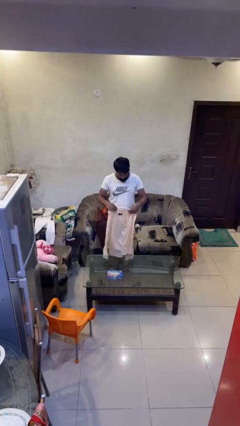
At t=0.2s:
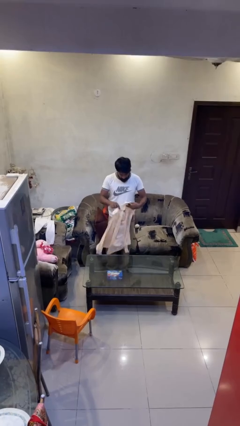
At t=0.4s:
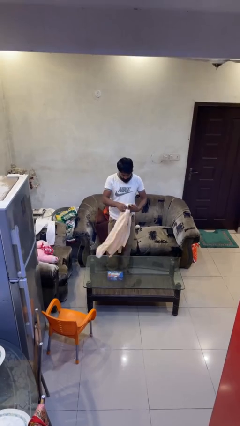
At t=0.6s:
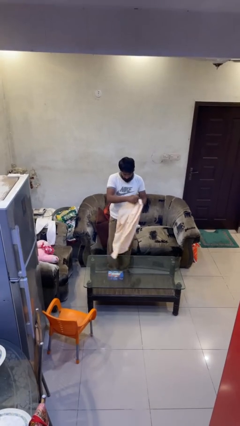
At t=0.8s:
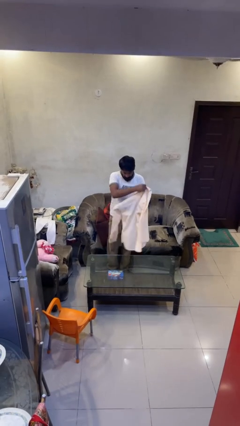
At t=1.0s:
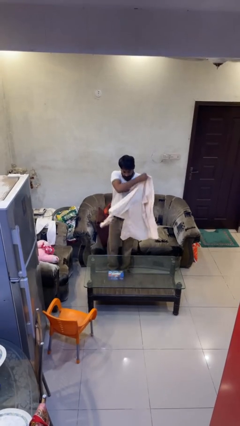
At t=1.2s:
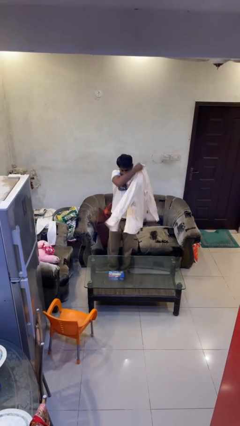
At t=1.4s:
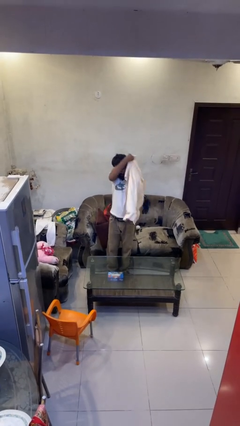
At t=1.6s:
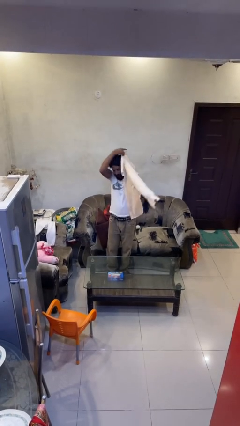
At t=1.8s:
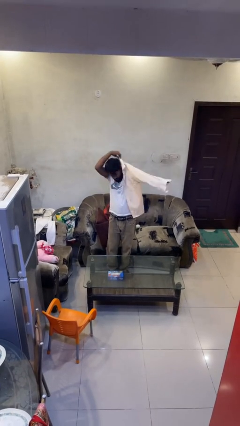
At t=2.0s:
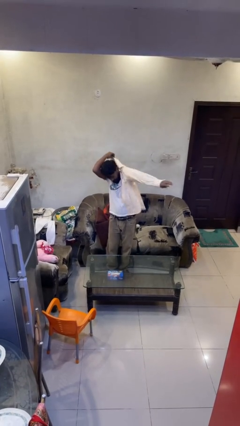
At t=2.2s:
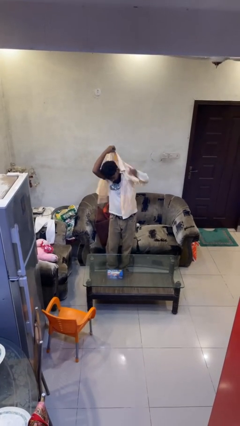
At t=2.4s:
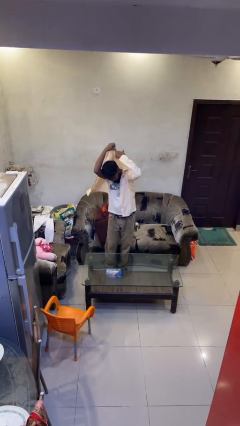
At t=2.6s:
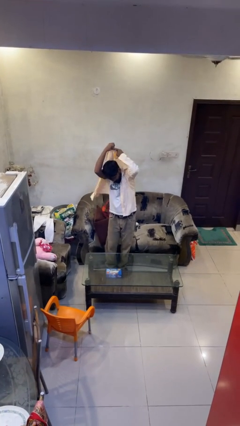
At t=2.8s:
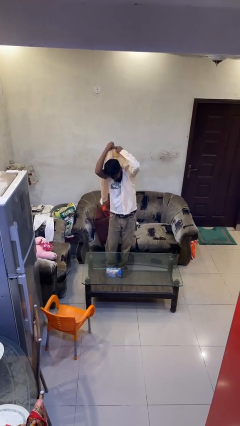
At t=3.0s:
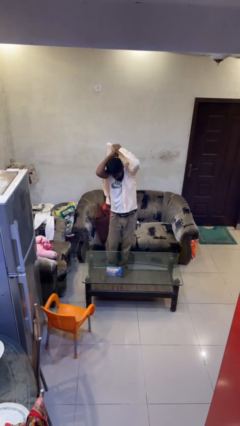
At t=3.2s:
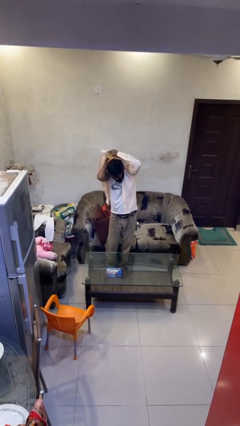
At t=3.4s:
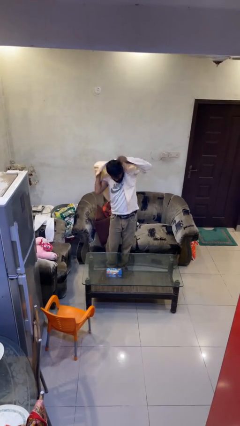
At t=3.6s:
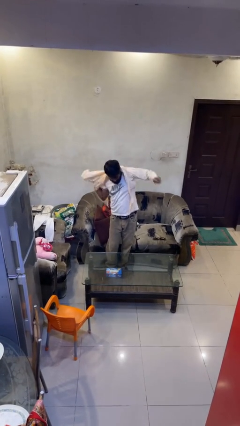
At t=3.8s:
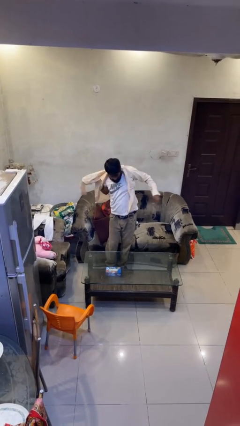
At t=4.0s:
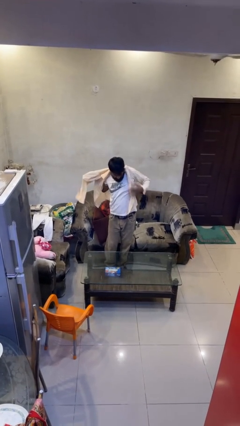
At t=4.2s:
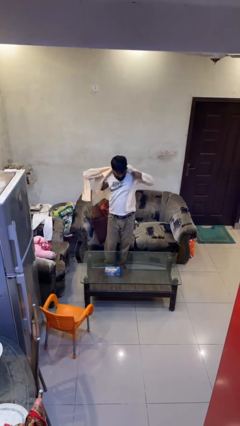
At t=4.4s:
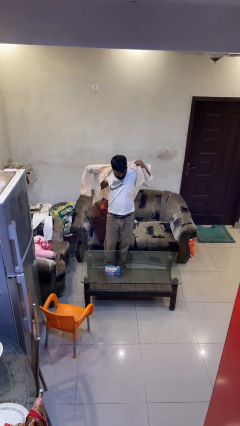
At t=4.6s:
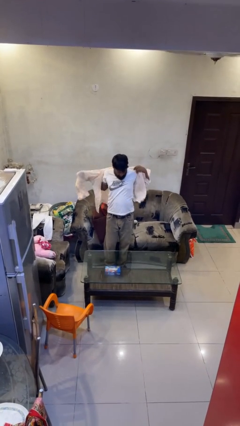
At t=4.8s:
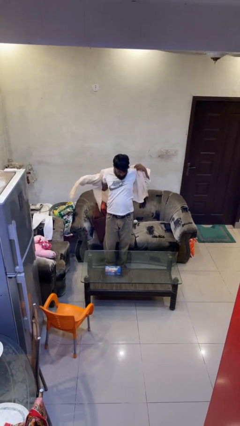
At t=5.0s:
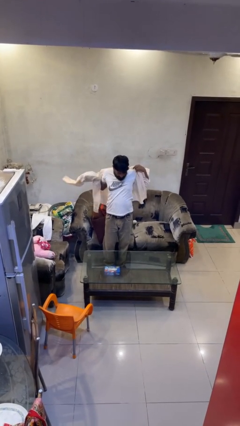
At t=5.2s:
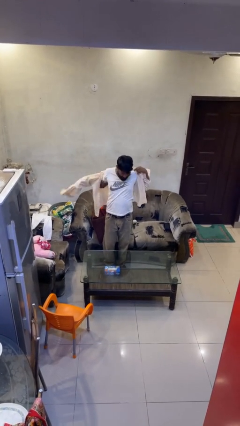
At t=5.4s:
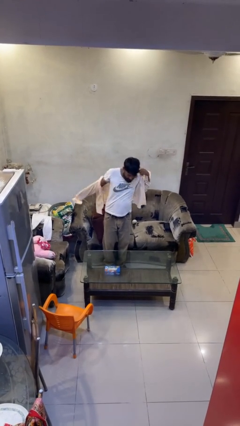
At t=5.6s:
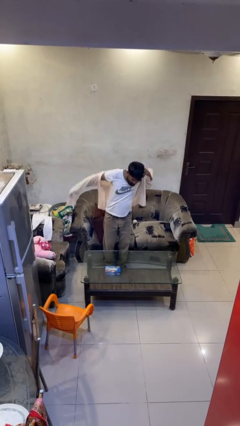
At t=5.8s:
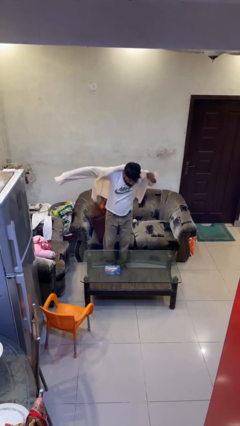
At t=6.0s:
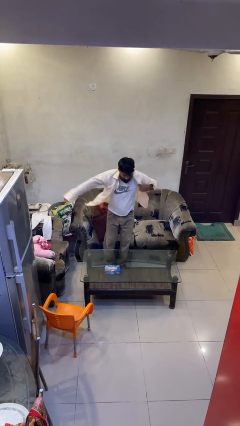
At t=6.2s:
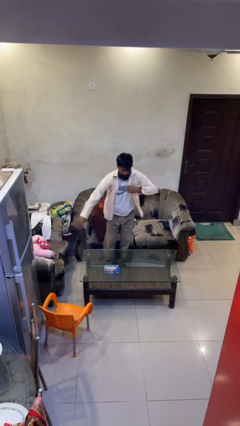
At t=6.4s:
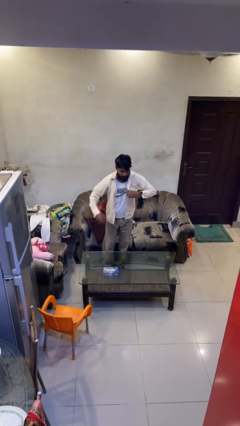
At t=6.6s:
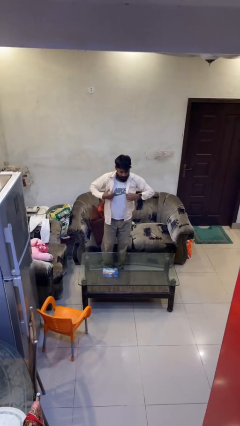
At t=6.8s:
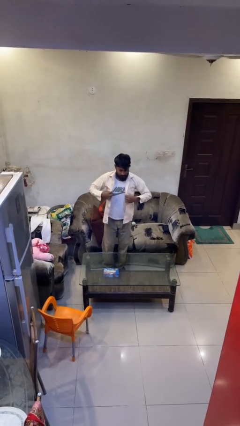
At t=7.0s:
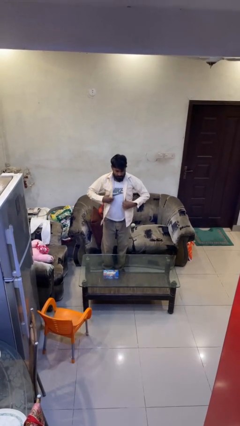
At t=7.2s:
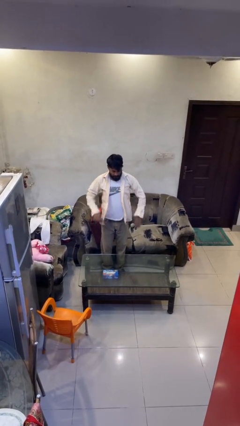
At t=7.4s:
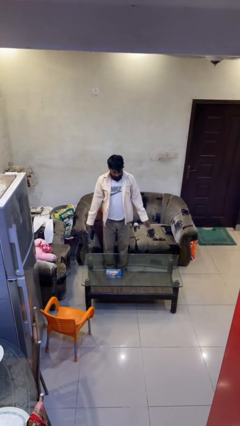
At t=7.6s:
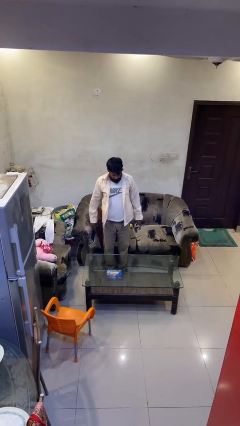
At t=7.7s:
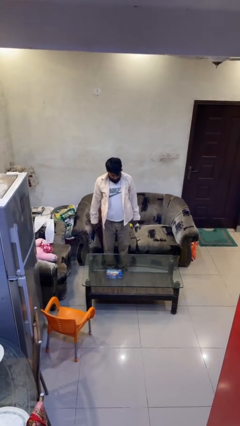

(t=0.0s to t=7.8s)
person puts on shirt

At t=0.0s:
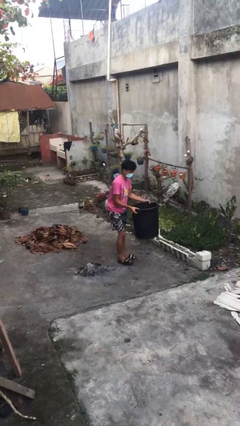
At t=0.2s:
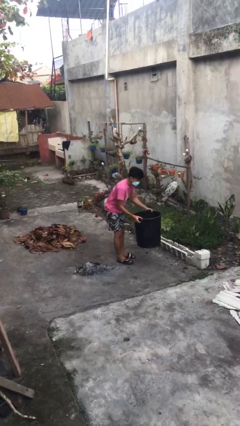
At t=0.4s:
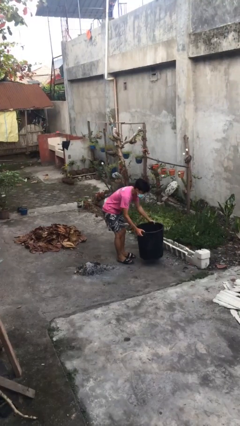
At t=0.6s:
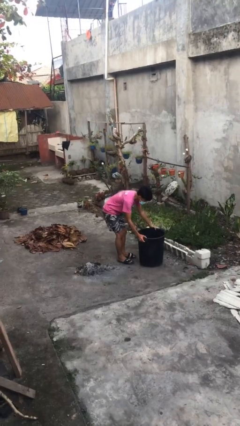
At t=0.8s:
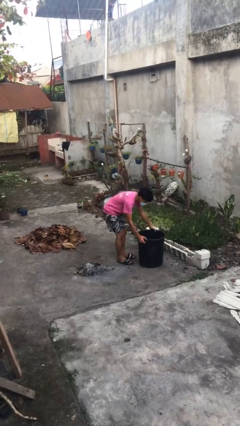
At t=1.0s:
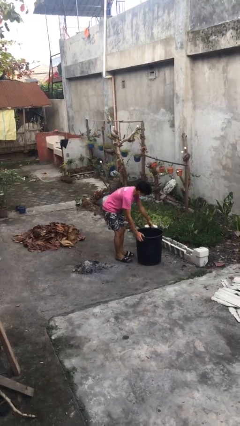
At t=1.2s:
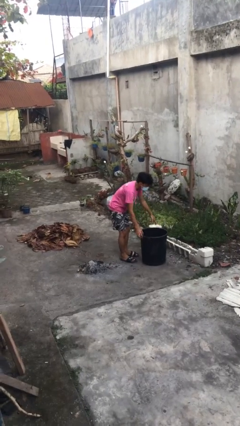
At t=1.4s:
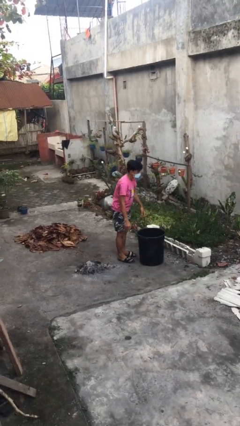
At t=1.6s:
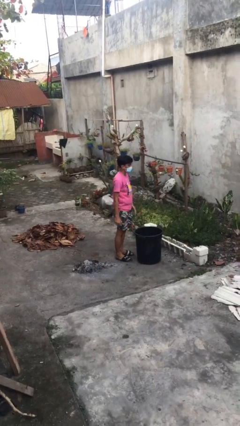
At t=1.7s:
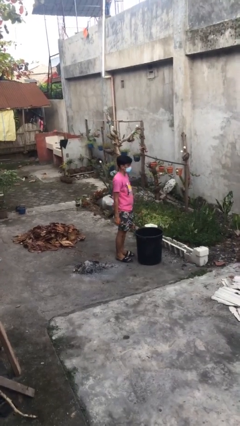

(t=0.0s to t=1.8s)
person puts down object on floor

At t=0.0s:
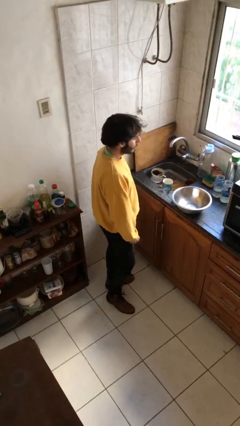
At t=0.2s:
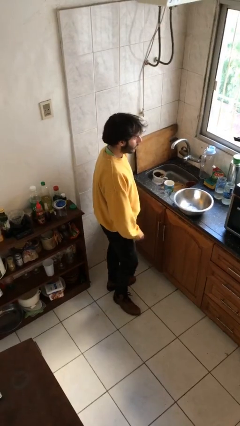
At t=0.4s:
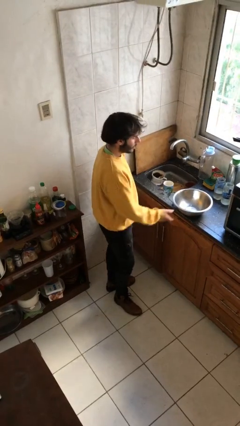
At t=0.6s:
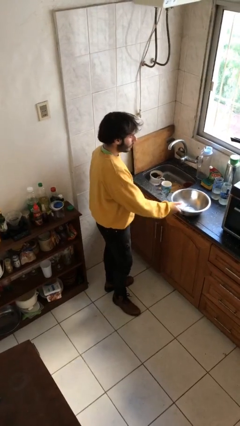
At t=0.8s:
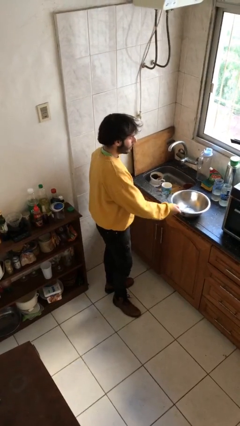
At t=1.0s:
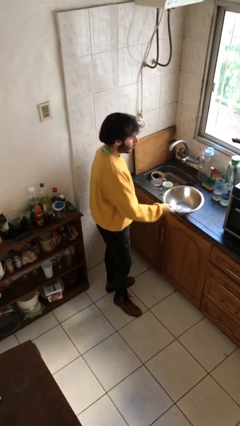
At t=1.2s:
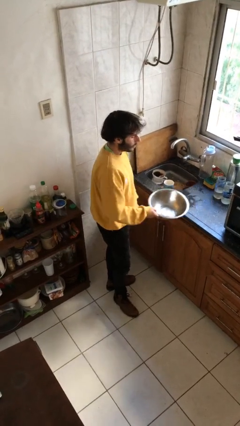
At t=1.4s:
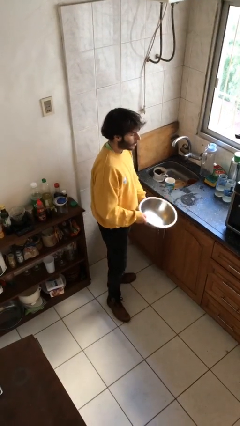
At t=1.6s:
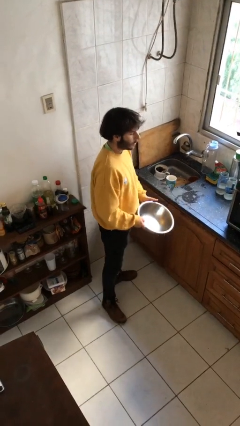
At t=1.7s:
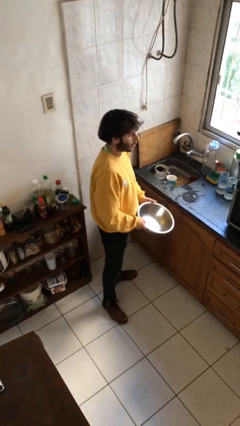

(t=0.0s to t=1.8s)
person picks up object from countertop

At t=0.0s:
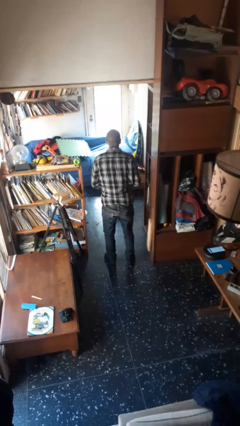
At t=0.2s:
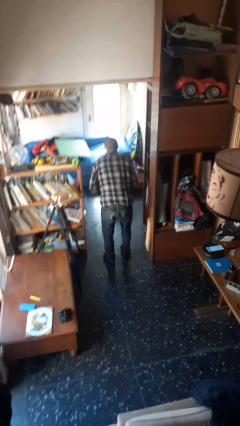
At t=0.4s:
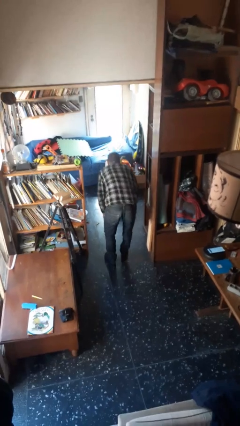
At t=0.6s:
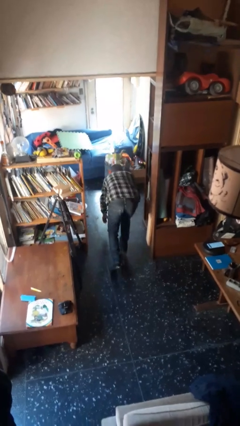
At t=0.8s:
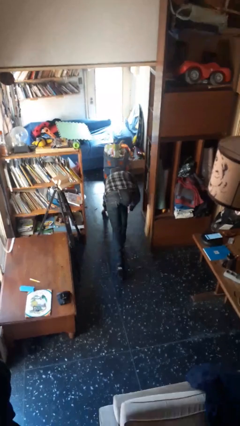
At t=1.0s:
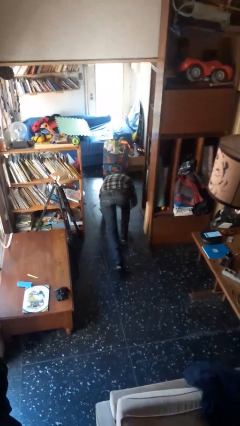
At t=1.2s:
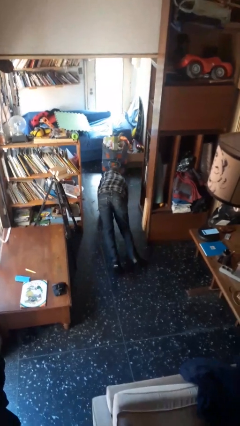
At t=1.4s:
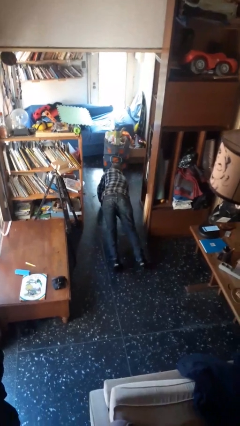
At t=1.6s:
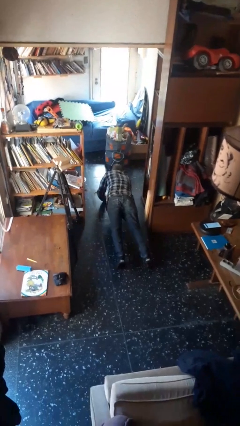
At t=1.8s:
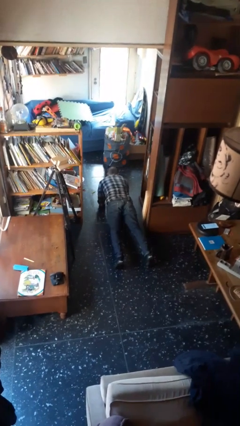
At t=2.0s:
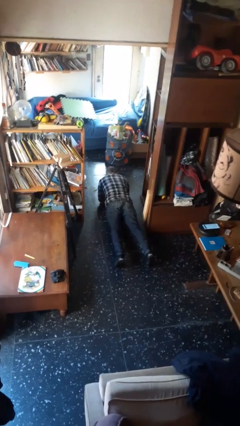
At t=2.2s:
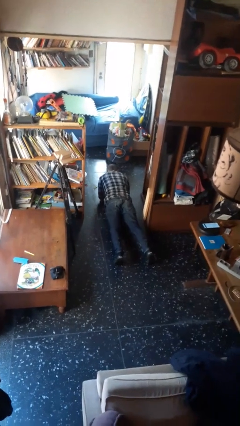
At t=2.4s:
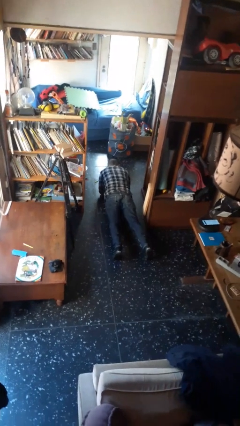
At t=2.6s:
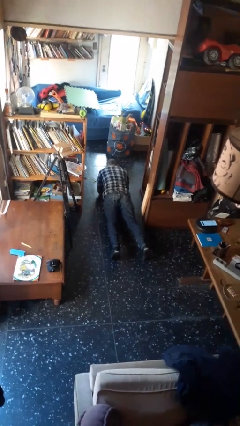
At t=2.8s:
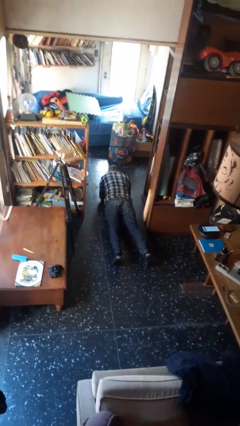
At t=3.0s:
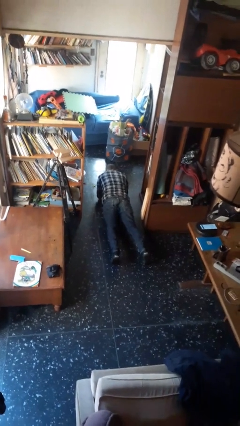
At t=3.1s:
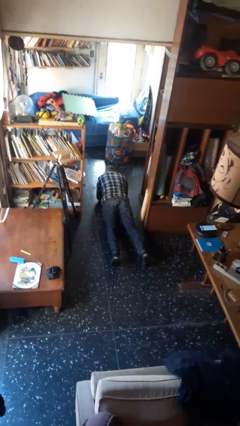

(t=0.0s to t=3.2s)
person exercises with plank

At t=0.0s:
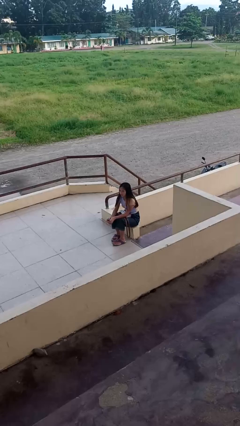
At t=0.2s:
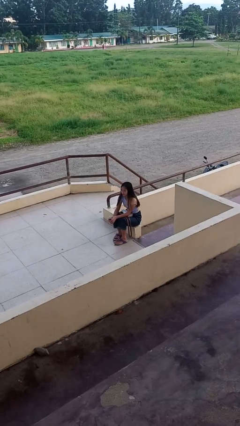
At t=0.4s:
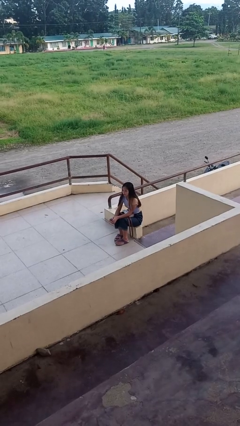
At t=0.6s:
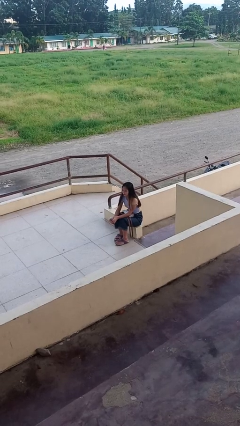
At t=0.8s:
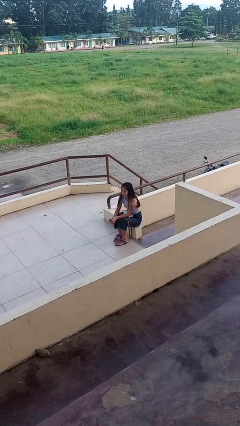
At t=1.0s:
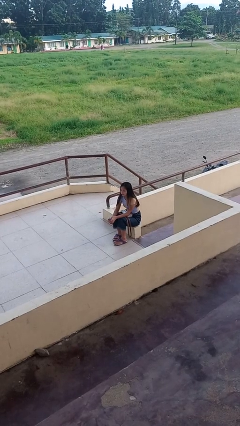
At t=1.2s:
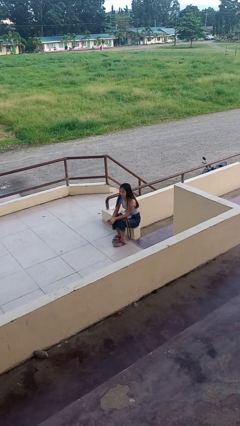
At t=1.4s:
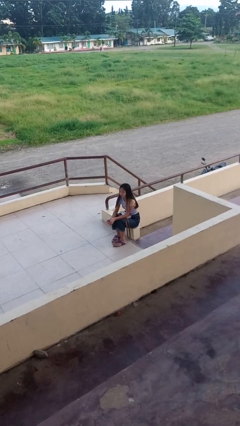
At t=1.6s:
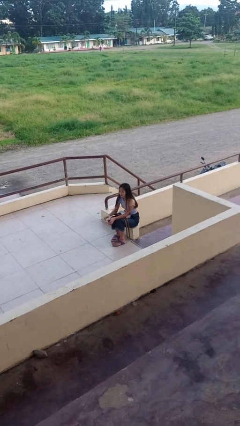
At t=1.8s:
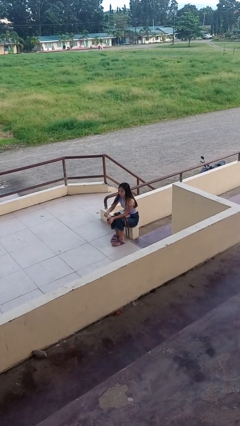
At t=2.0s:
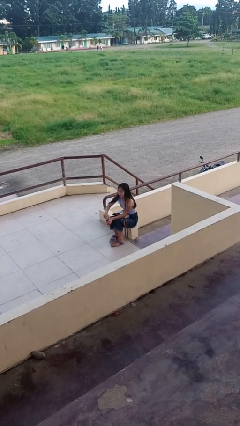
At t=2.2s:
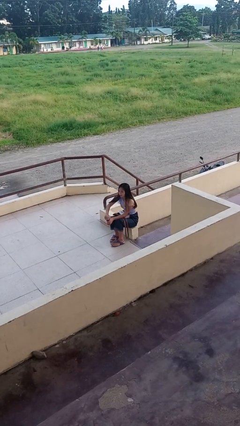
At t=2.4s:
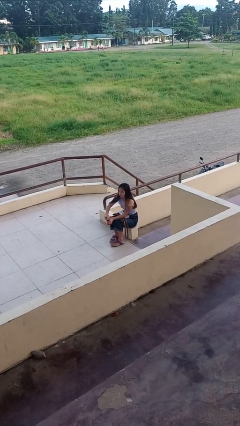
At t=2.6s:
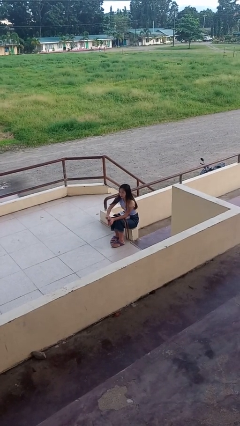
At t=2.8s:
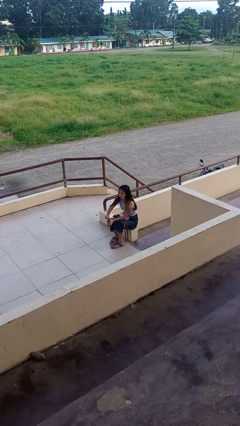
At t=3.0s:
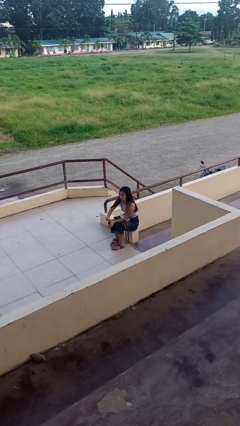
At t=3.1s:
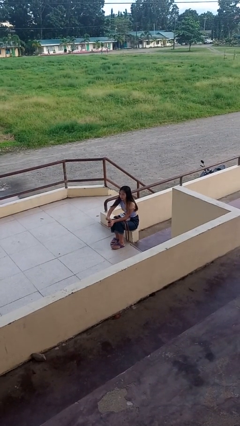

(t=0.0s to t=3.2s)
person opens beverage can
